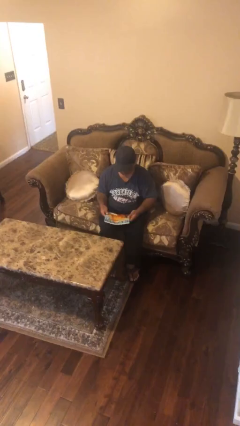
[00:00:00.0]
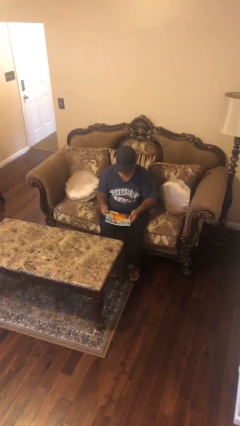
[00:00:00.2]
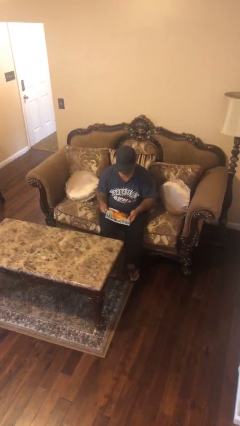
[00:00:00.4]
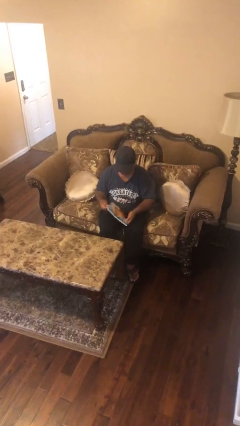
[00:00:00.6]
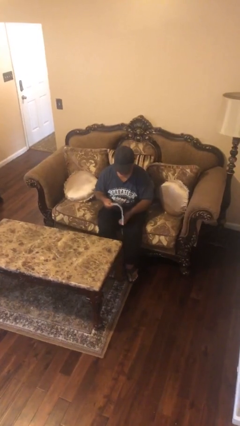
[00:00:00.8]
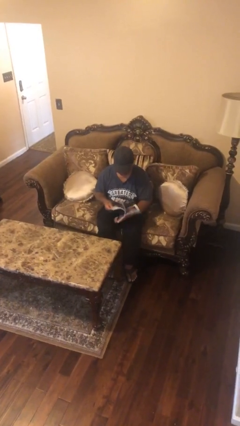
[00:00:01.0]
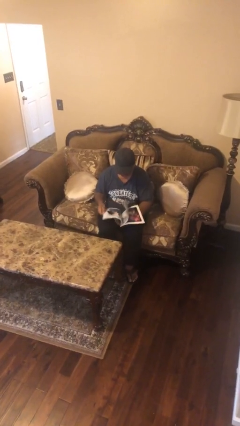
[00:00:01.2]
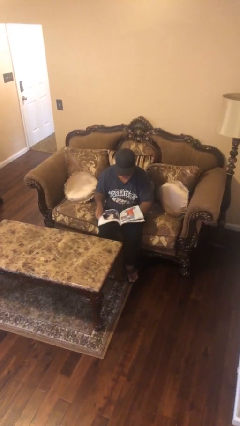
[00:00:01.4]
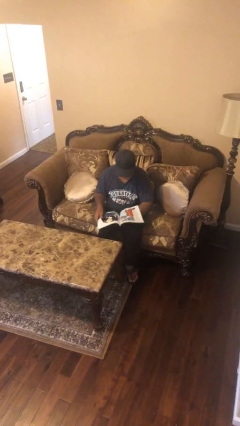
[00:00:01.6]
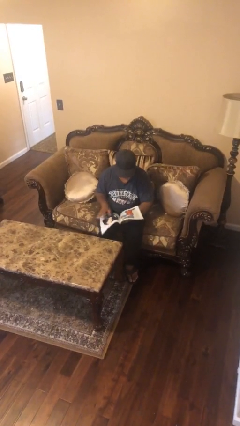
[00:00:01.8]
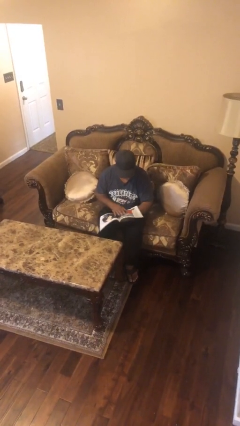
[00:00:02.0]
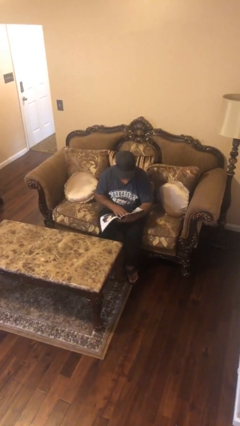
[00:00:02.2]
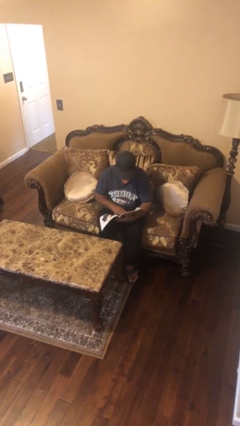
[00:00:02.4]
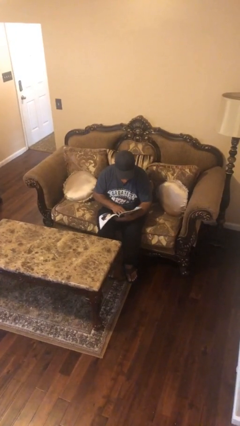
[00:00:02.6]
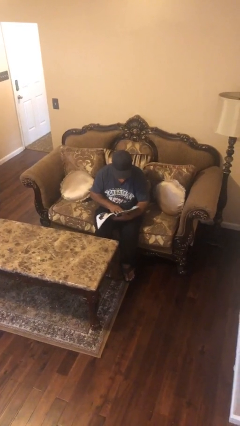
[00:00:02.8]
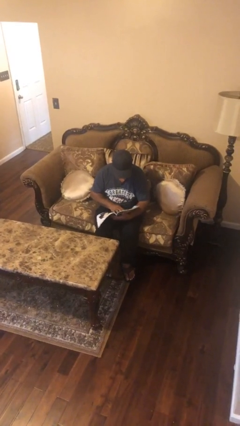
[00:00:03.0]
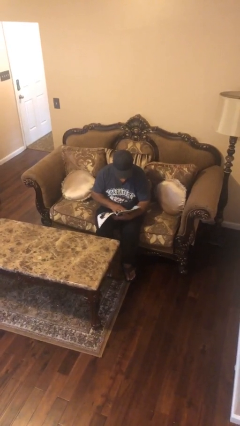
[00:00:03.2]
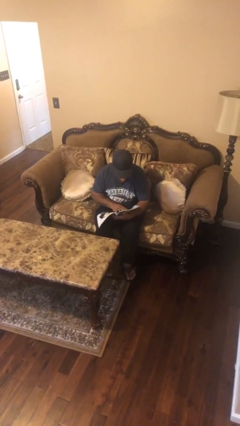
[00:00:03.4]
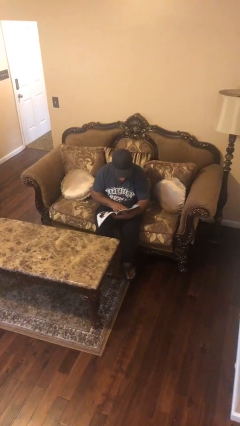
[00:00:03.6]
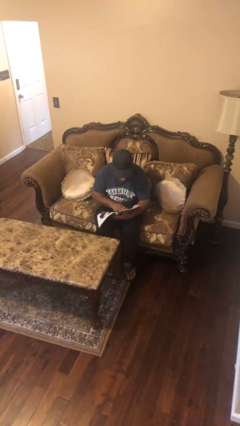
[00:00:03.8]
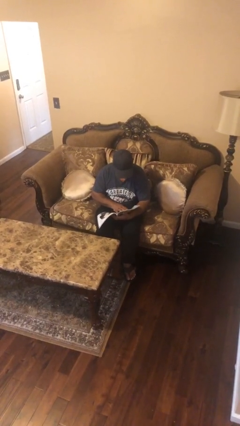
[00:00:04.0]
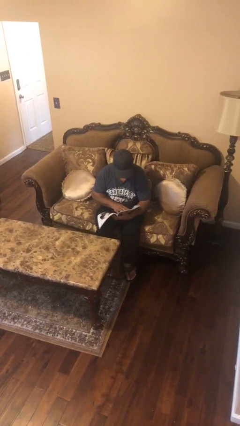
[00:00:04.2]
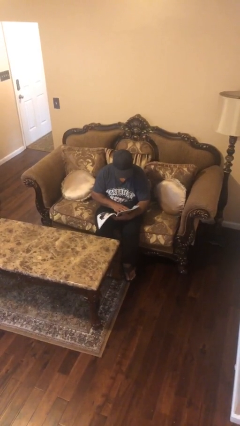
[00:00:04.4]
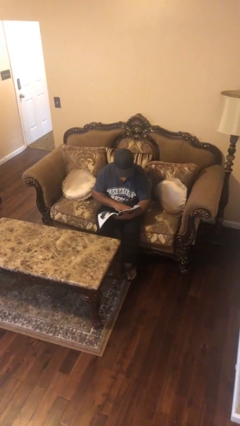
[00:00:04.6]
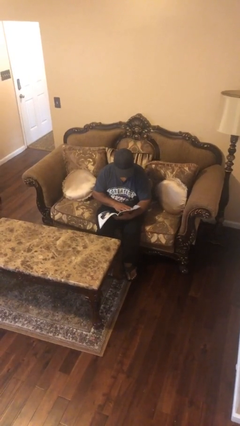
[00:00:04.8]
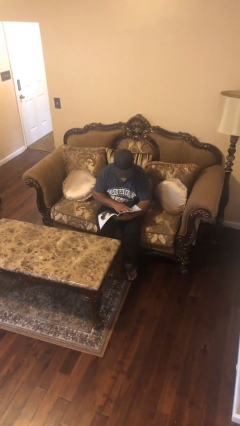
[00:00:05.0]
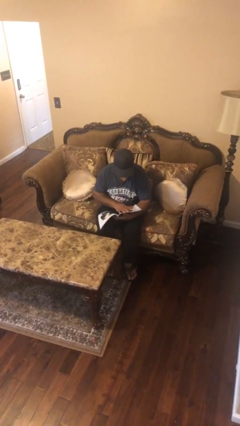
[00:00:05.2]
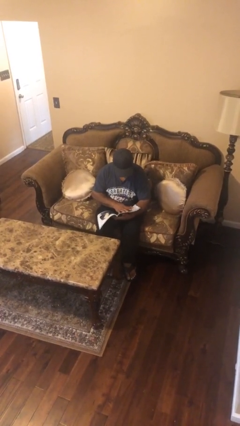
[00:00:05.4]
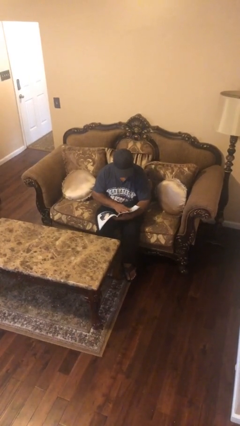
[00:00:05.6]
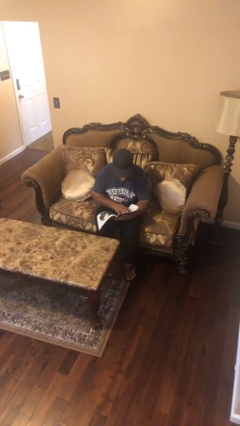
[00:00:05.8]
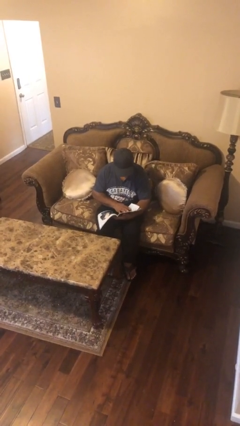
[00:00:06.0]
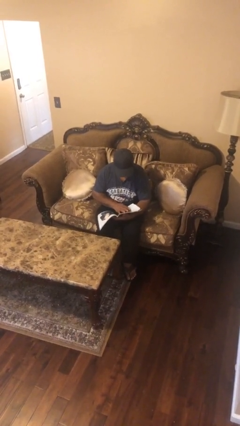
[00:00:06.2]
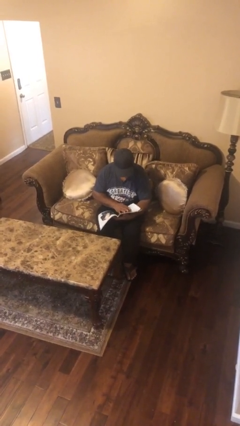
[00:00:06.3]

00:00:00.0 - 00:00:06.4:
person reads document

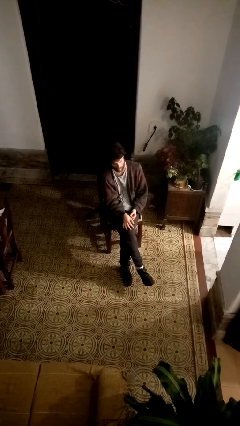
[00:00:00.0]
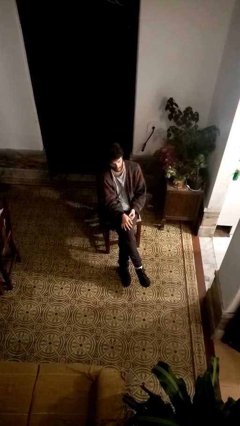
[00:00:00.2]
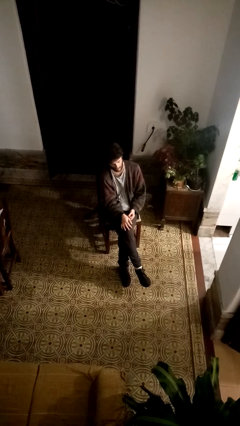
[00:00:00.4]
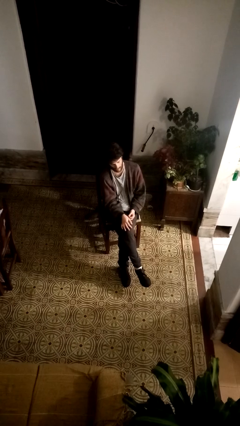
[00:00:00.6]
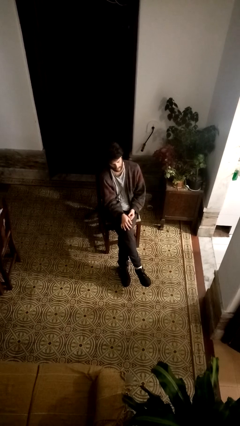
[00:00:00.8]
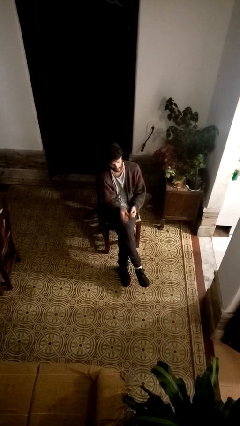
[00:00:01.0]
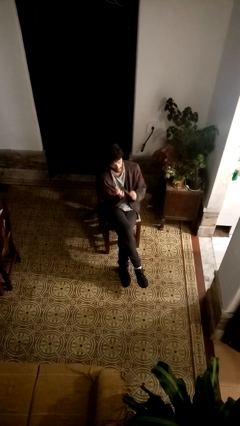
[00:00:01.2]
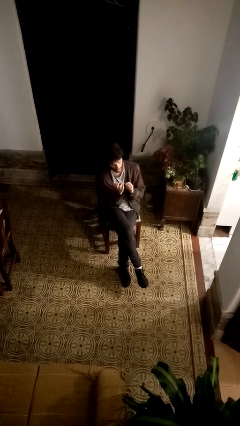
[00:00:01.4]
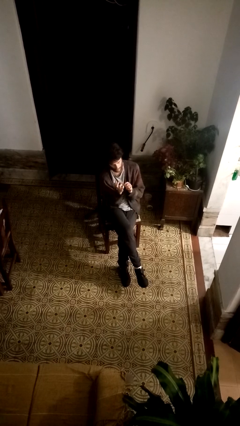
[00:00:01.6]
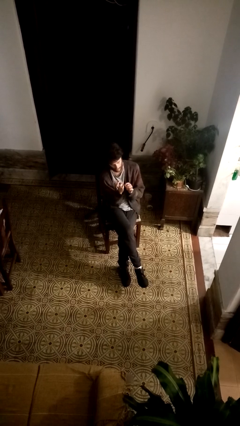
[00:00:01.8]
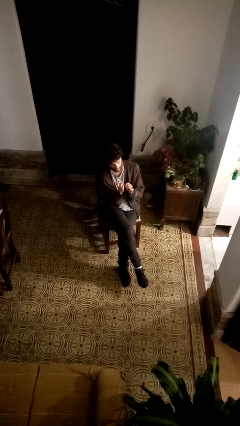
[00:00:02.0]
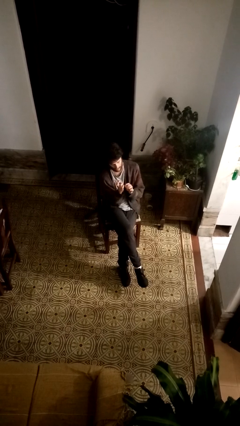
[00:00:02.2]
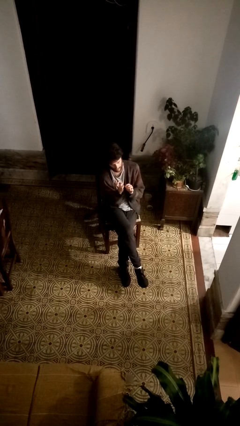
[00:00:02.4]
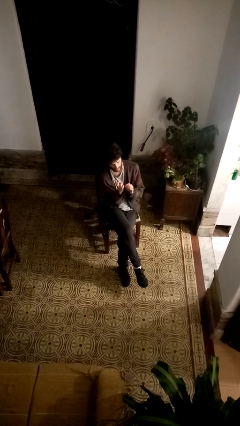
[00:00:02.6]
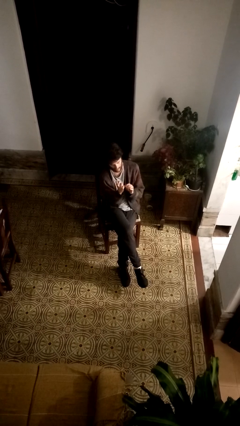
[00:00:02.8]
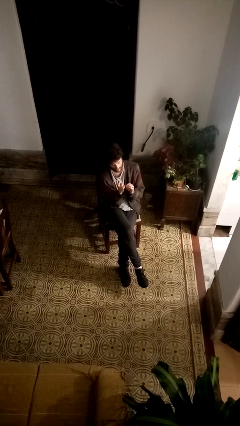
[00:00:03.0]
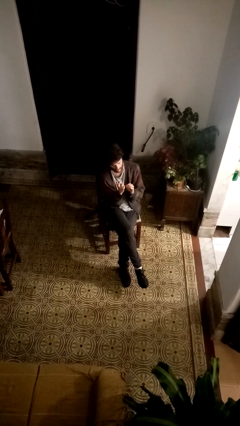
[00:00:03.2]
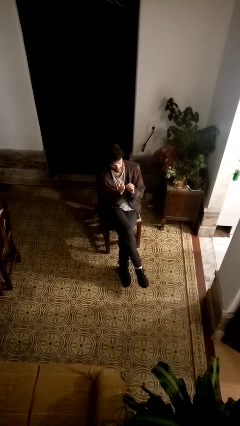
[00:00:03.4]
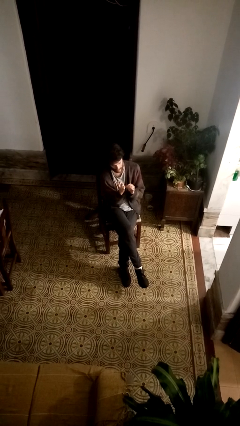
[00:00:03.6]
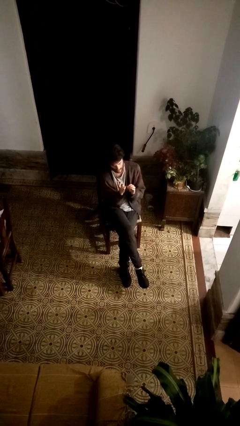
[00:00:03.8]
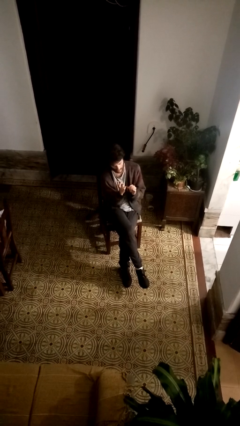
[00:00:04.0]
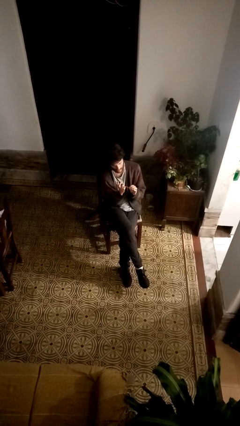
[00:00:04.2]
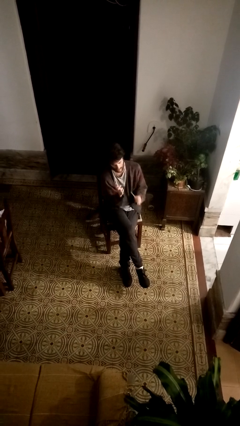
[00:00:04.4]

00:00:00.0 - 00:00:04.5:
person files fingernails

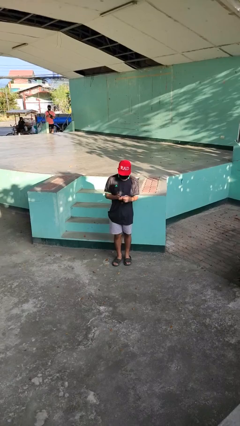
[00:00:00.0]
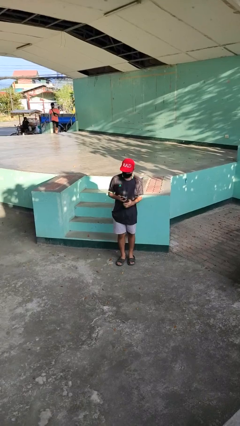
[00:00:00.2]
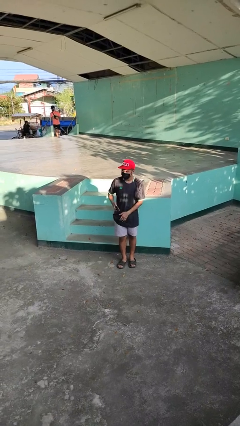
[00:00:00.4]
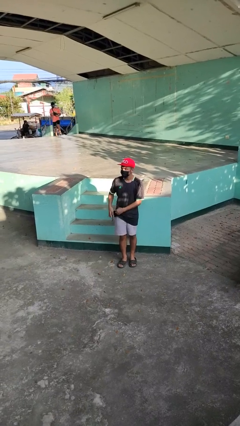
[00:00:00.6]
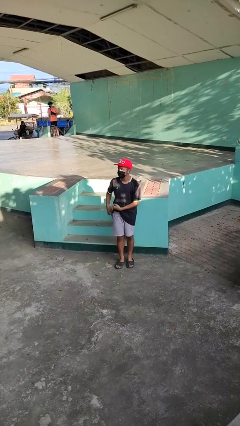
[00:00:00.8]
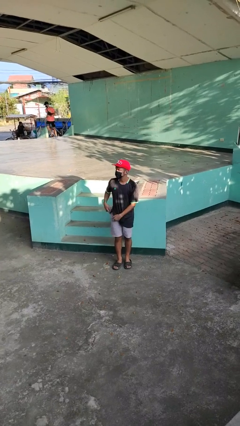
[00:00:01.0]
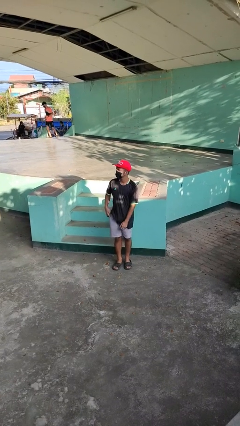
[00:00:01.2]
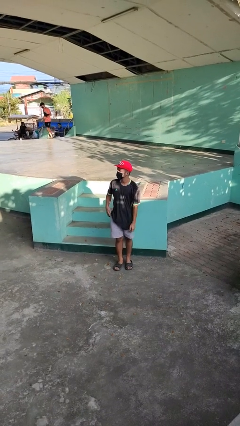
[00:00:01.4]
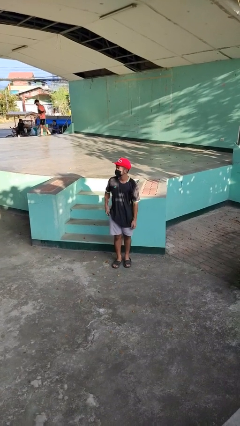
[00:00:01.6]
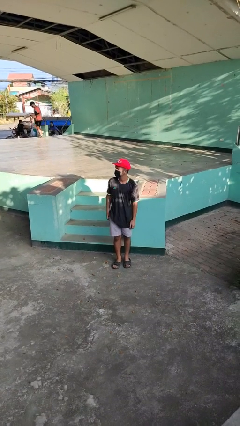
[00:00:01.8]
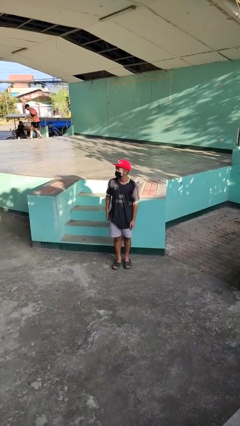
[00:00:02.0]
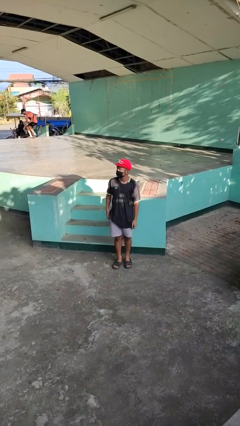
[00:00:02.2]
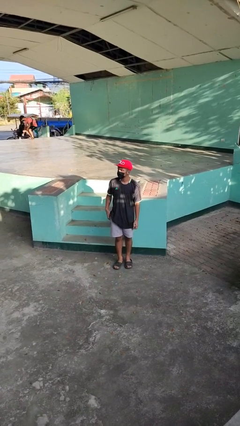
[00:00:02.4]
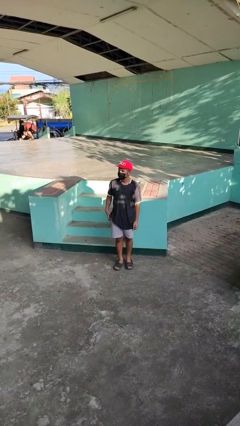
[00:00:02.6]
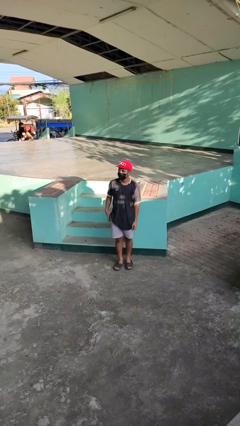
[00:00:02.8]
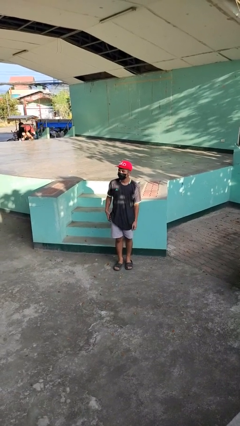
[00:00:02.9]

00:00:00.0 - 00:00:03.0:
person puts phone into pocket

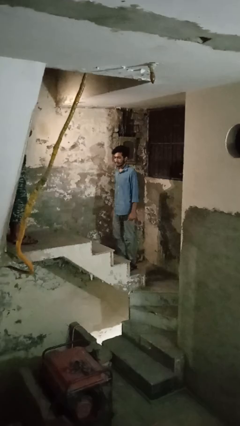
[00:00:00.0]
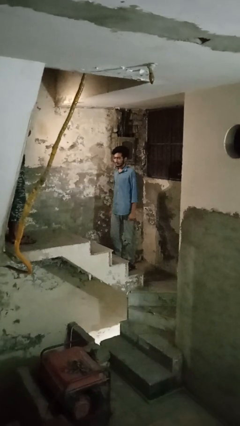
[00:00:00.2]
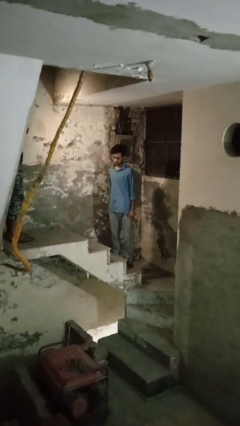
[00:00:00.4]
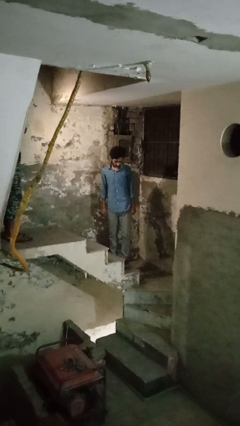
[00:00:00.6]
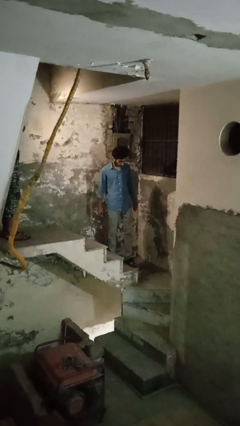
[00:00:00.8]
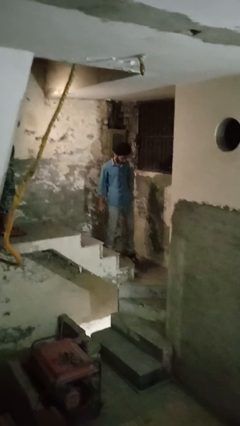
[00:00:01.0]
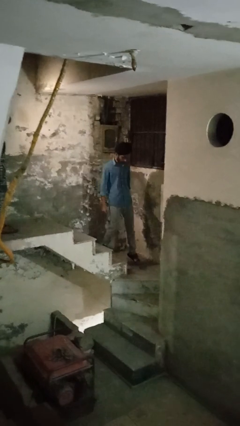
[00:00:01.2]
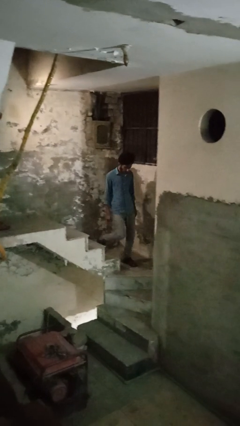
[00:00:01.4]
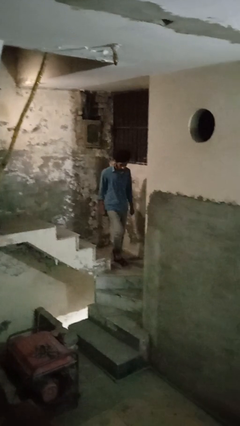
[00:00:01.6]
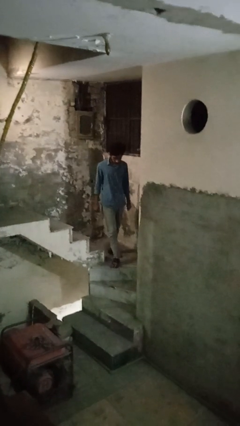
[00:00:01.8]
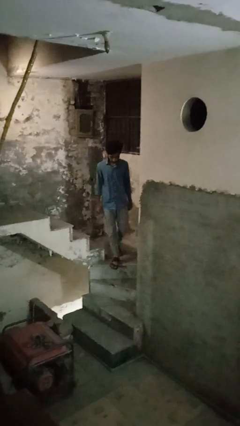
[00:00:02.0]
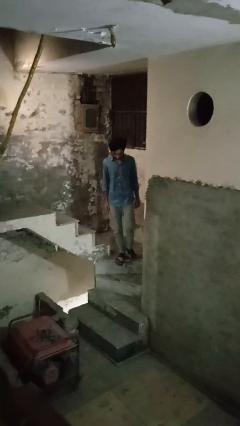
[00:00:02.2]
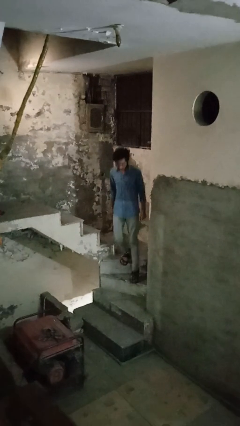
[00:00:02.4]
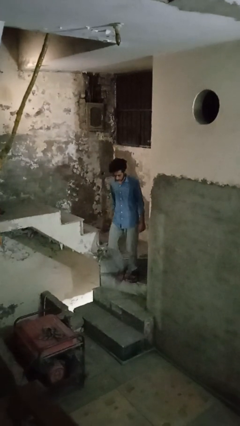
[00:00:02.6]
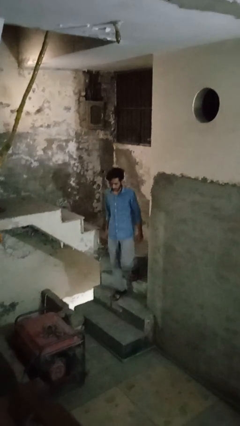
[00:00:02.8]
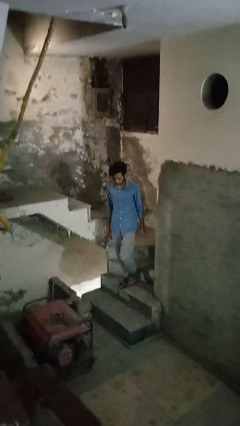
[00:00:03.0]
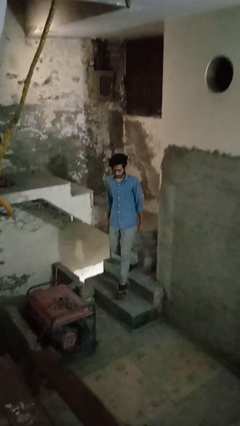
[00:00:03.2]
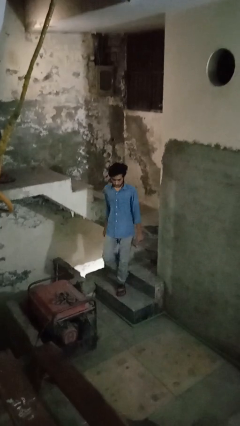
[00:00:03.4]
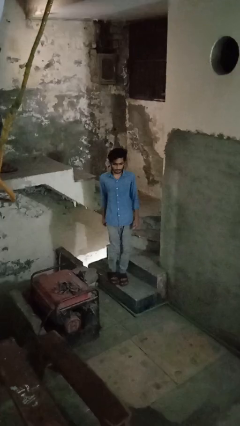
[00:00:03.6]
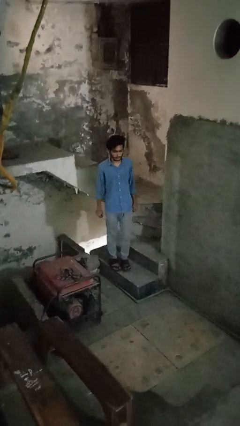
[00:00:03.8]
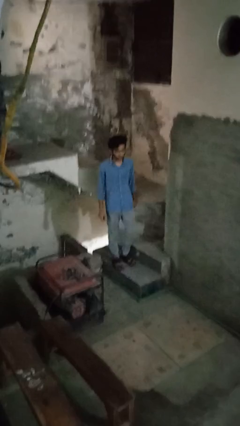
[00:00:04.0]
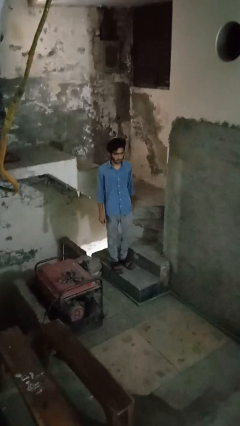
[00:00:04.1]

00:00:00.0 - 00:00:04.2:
person climbs down stairs
